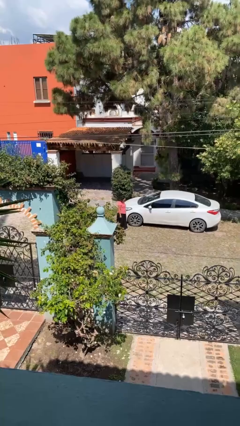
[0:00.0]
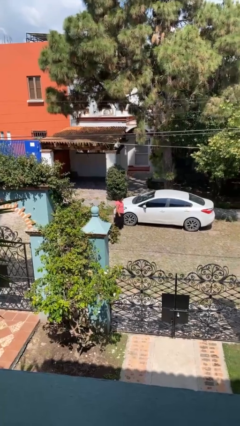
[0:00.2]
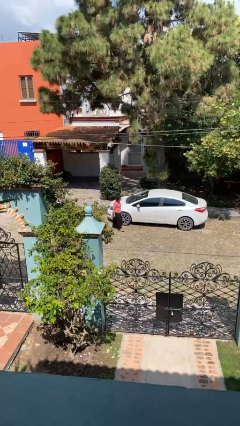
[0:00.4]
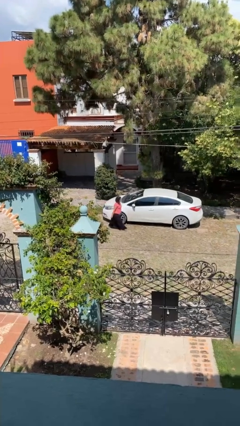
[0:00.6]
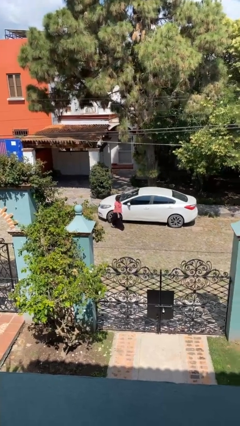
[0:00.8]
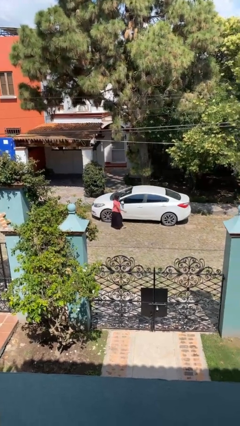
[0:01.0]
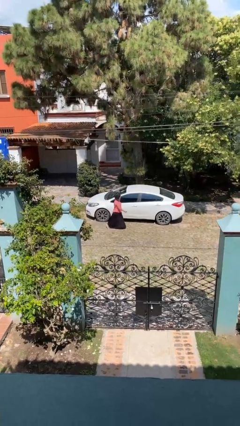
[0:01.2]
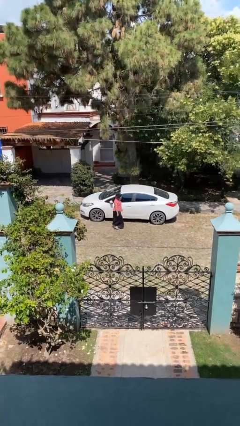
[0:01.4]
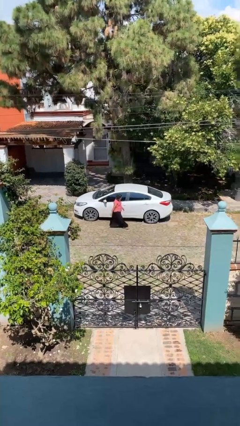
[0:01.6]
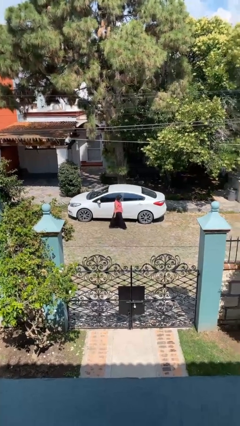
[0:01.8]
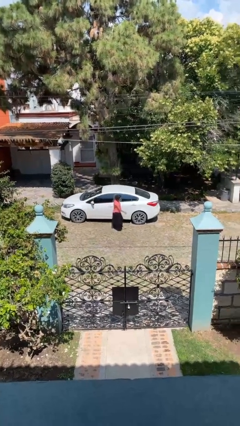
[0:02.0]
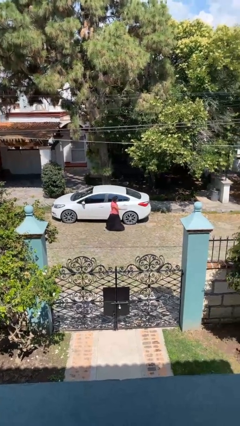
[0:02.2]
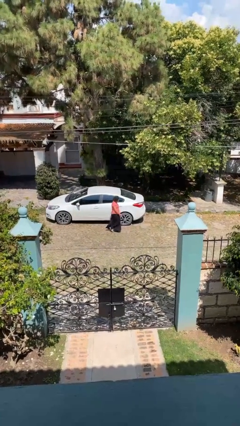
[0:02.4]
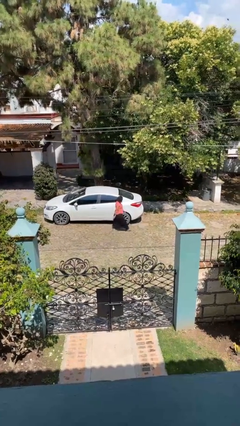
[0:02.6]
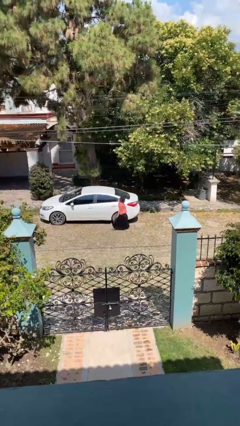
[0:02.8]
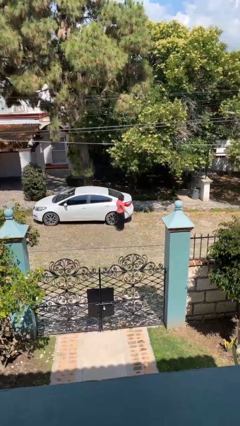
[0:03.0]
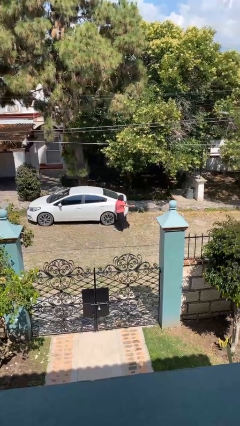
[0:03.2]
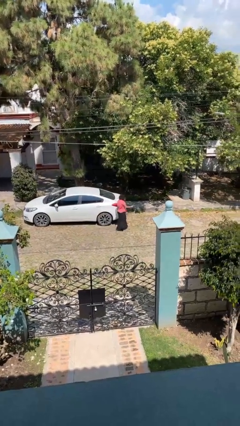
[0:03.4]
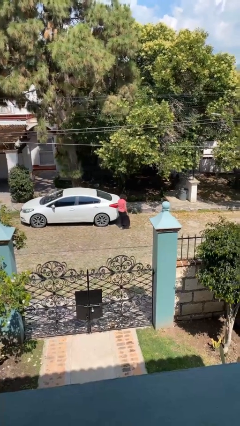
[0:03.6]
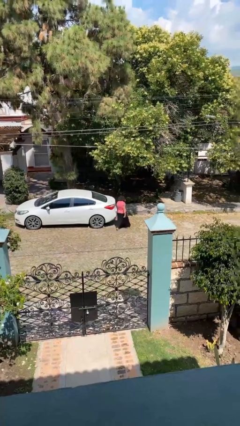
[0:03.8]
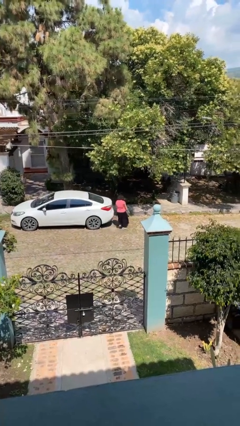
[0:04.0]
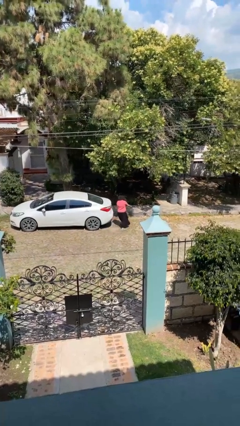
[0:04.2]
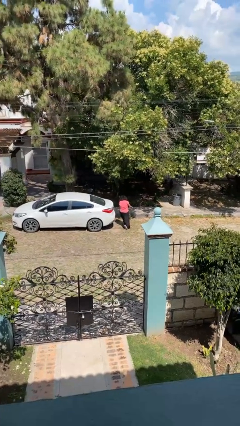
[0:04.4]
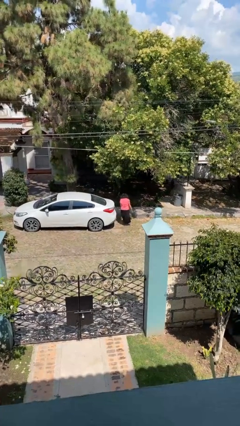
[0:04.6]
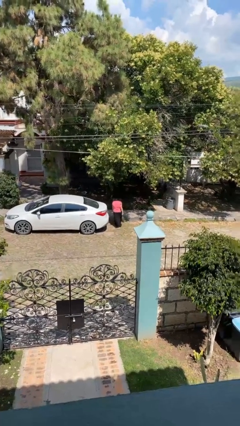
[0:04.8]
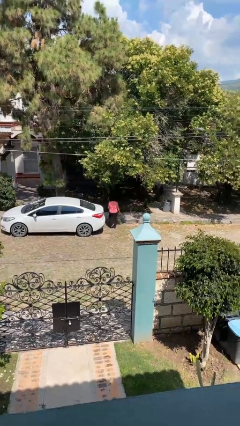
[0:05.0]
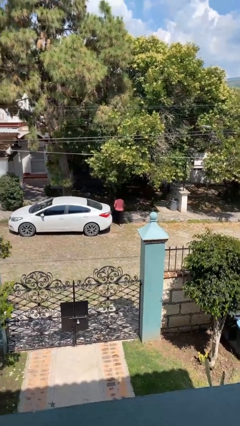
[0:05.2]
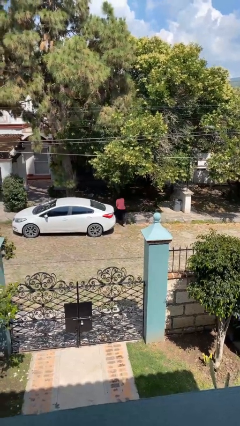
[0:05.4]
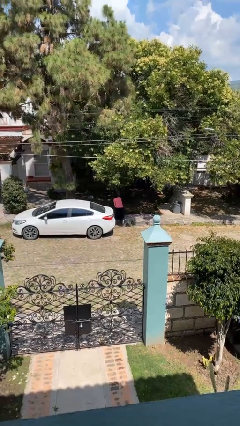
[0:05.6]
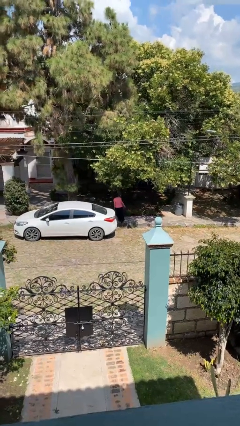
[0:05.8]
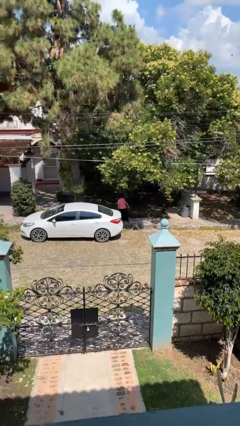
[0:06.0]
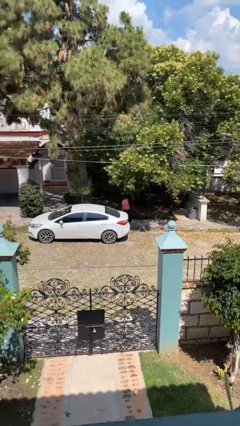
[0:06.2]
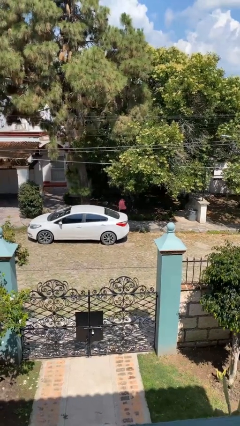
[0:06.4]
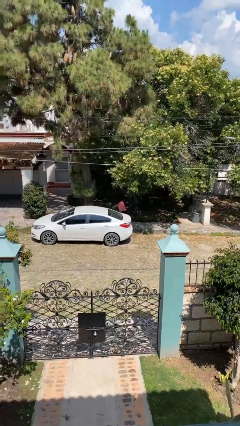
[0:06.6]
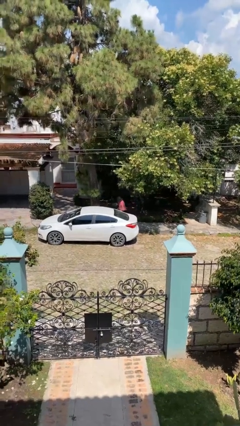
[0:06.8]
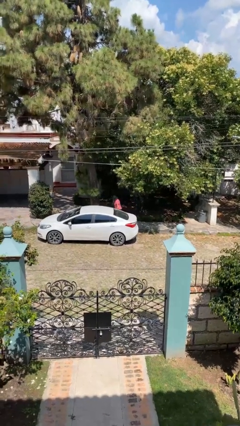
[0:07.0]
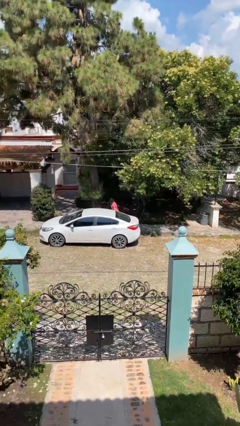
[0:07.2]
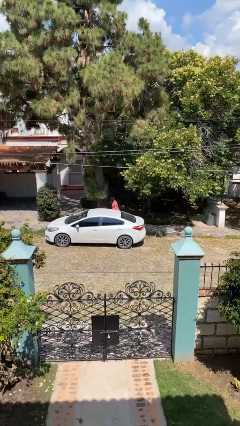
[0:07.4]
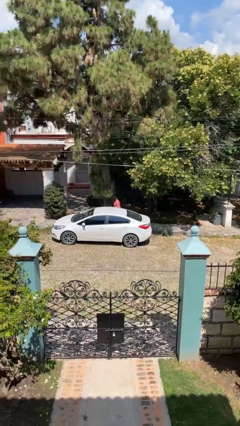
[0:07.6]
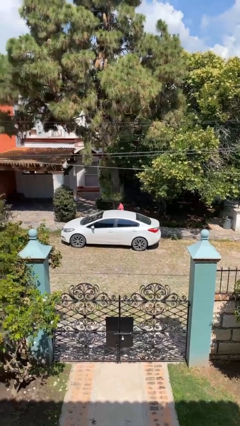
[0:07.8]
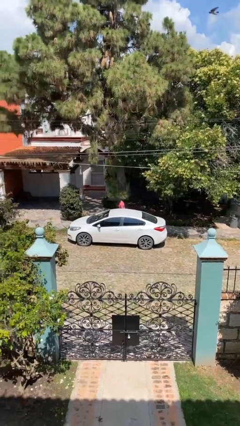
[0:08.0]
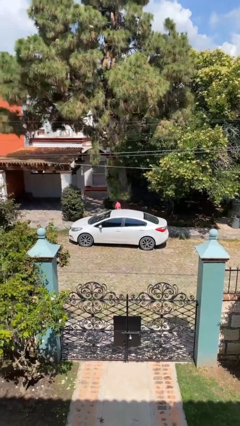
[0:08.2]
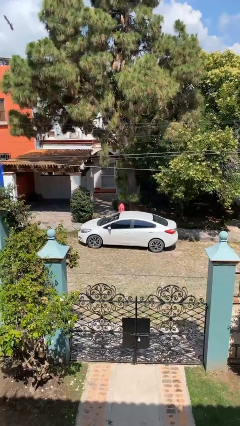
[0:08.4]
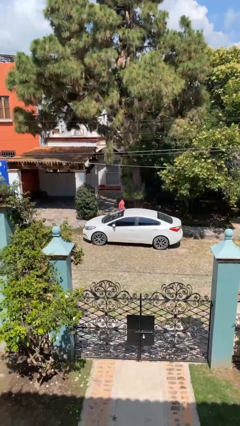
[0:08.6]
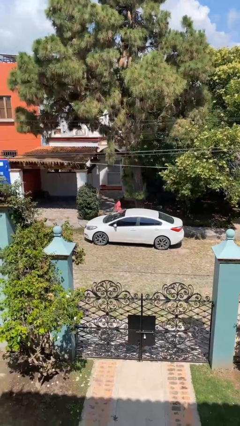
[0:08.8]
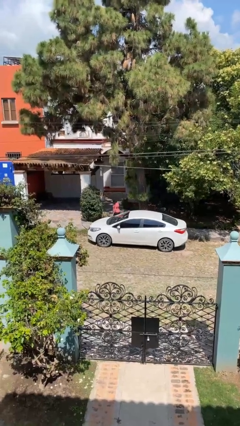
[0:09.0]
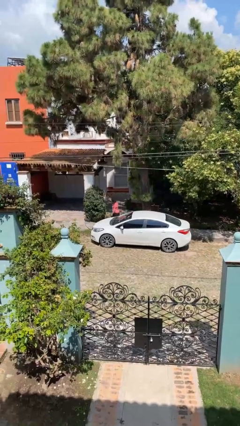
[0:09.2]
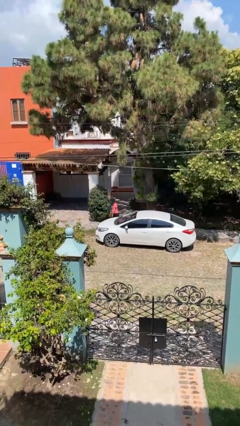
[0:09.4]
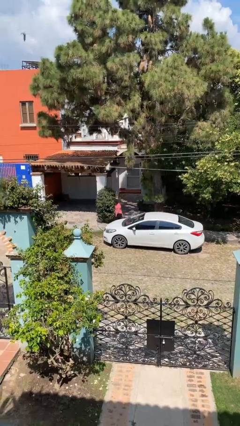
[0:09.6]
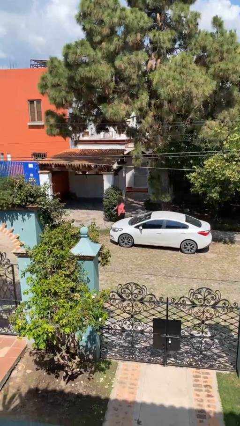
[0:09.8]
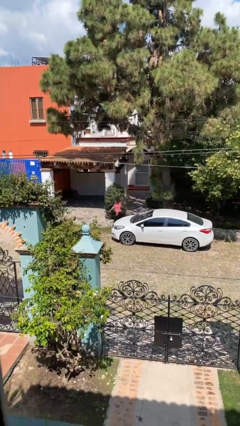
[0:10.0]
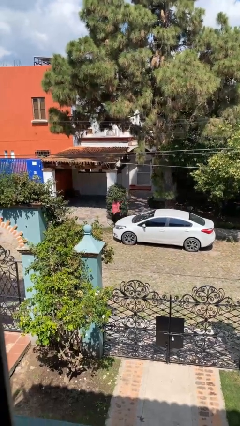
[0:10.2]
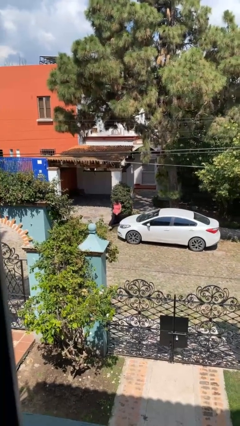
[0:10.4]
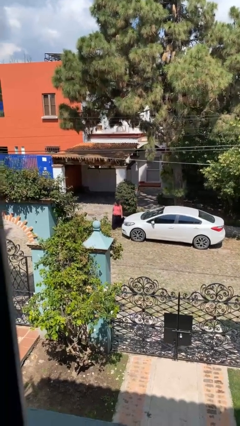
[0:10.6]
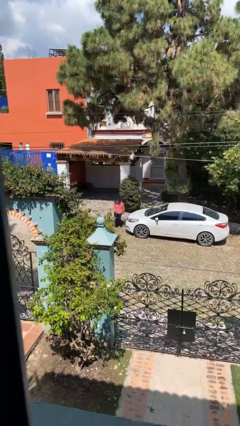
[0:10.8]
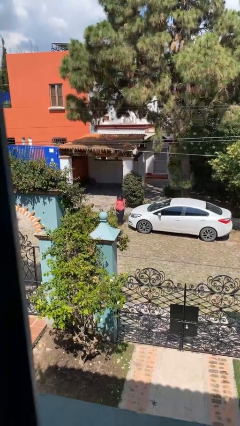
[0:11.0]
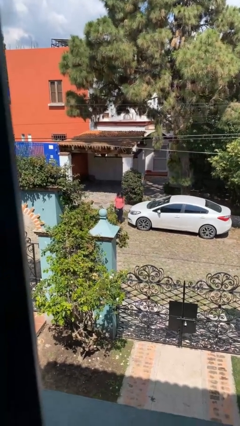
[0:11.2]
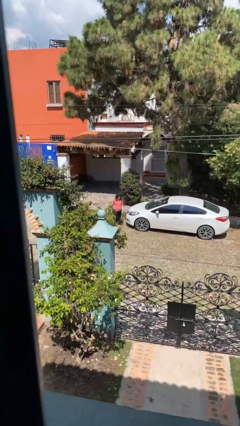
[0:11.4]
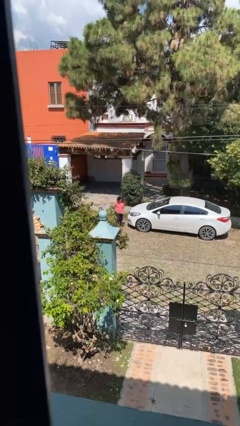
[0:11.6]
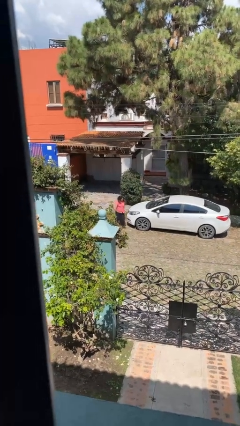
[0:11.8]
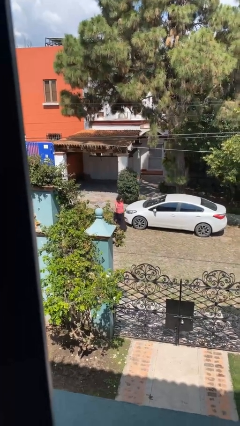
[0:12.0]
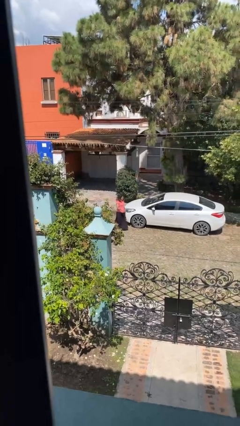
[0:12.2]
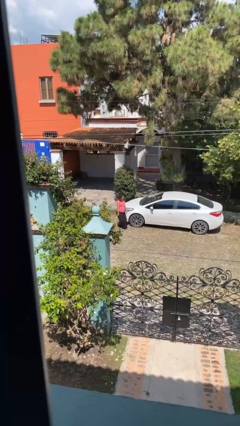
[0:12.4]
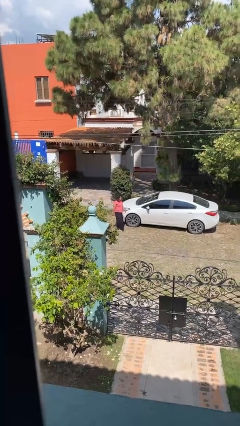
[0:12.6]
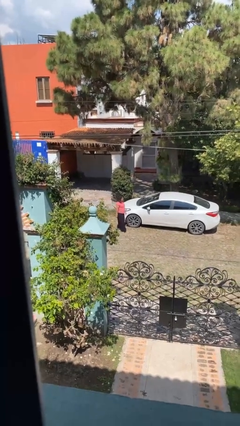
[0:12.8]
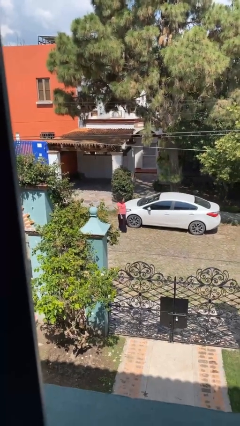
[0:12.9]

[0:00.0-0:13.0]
person walks around car

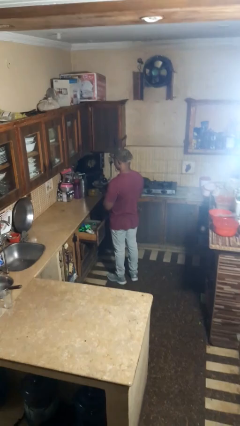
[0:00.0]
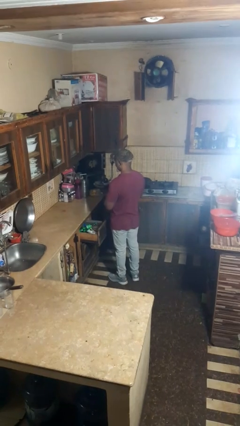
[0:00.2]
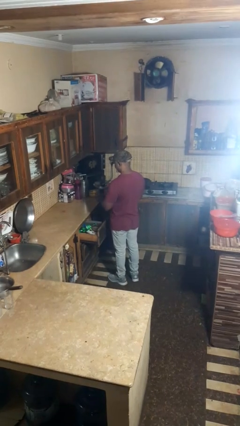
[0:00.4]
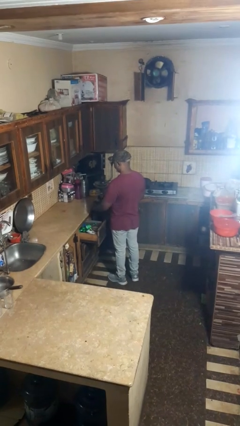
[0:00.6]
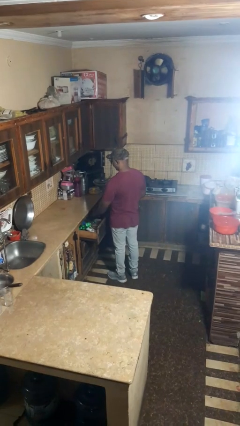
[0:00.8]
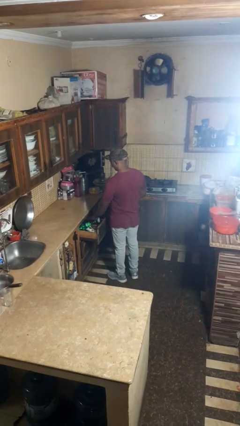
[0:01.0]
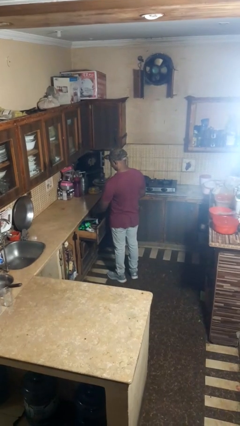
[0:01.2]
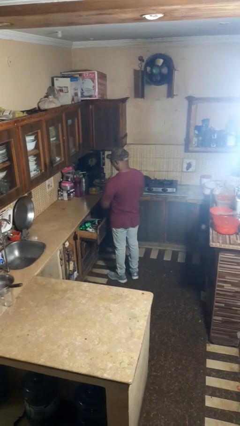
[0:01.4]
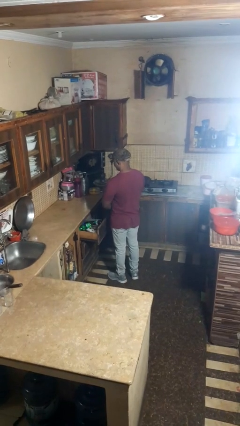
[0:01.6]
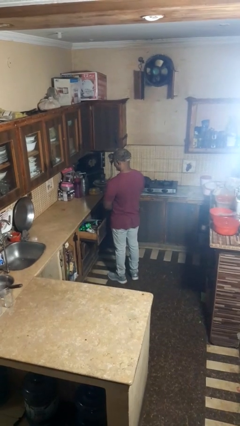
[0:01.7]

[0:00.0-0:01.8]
person puts object into kitchen drawer

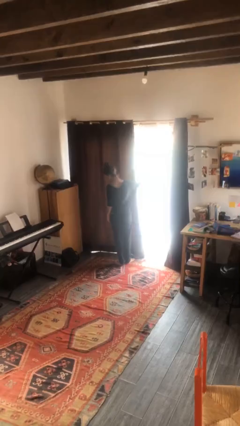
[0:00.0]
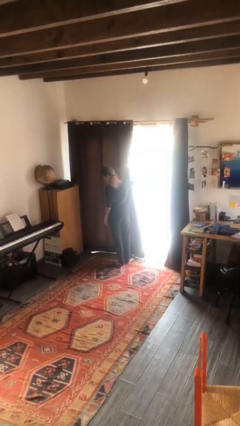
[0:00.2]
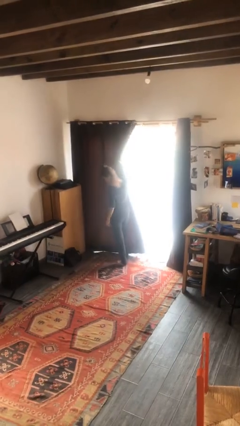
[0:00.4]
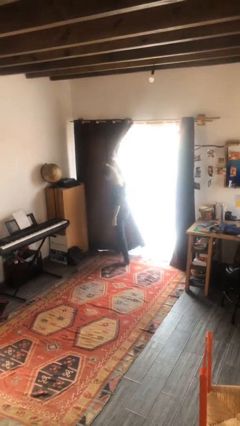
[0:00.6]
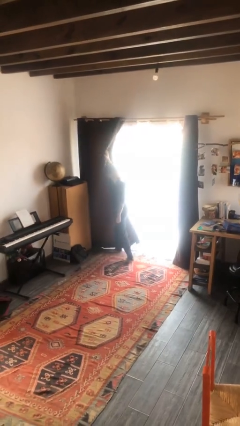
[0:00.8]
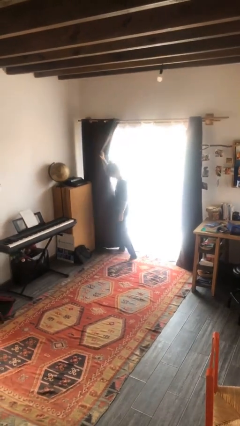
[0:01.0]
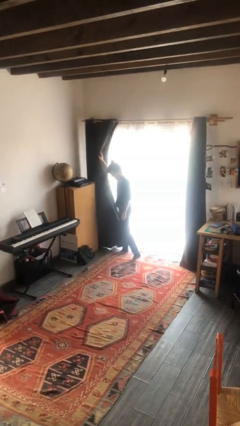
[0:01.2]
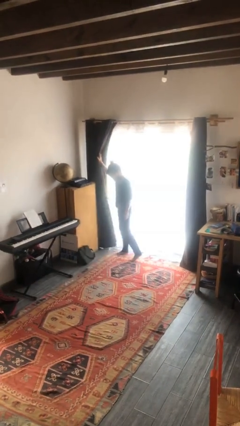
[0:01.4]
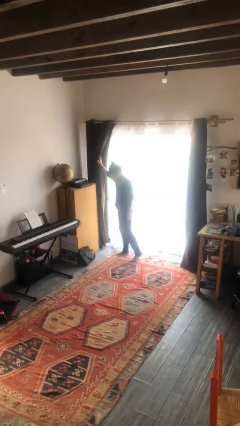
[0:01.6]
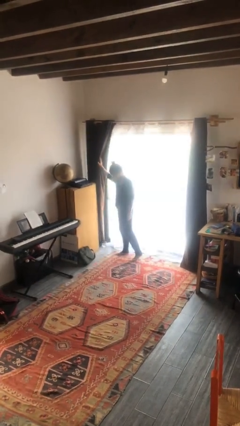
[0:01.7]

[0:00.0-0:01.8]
person opens curtains

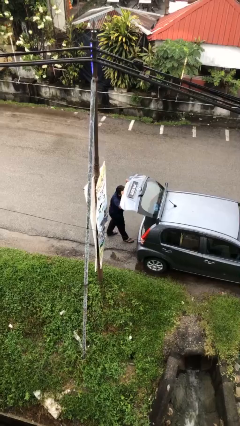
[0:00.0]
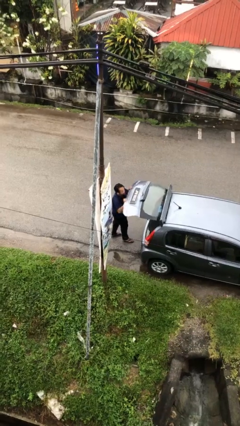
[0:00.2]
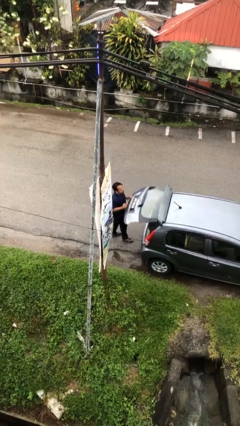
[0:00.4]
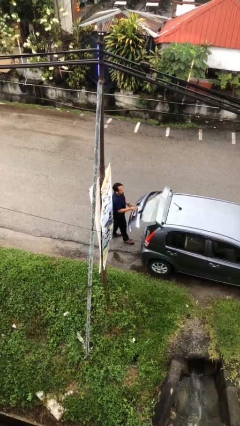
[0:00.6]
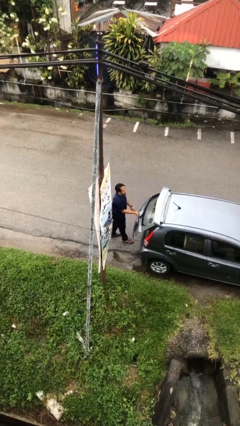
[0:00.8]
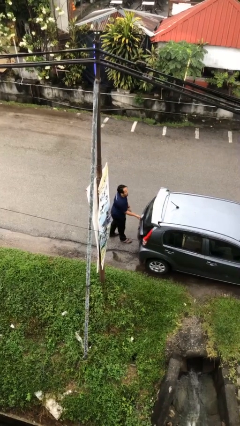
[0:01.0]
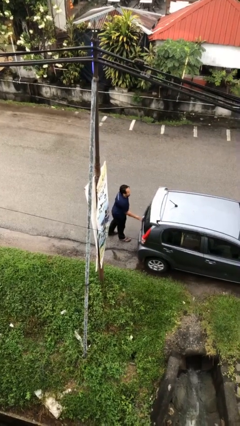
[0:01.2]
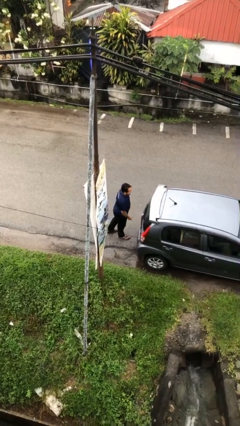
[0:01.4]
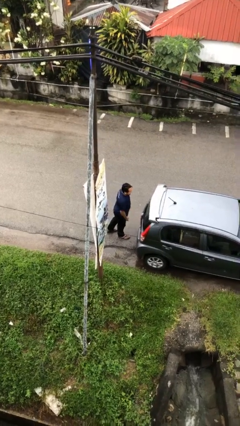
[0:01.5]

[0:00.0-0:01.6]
person closes car trunk
